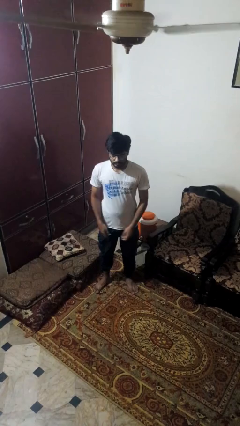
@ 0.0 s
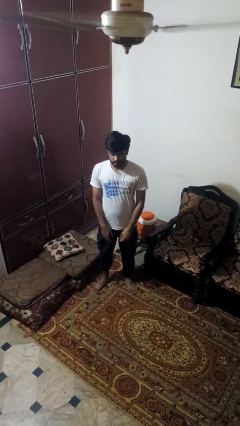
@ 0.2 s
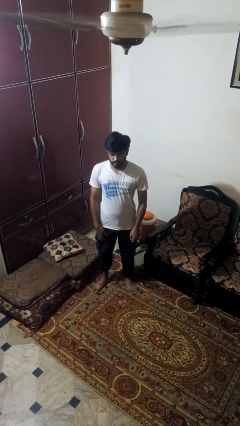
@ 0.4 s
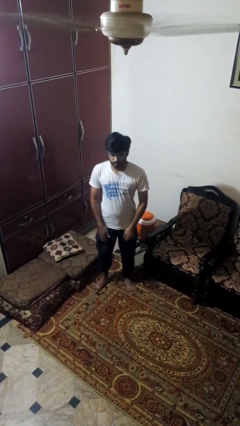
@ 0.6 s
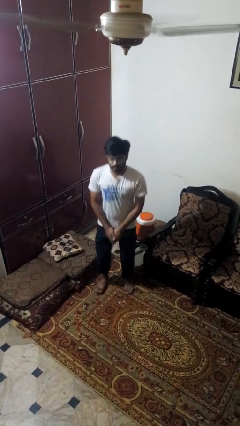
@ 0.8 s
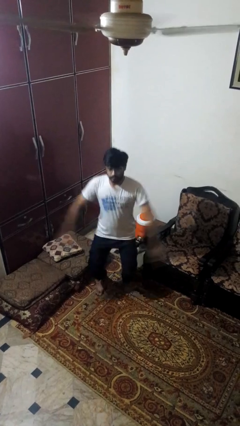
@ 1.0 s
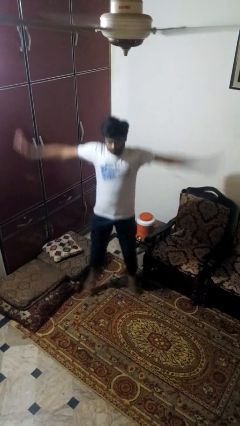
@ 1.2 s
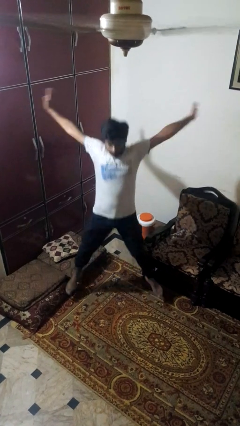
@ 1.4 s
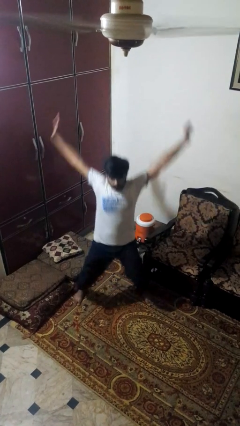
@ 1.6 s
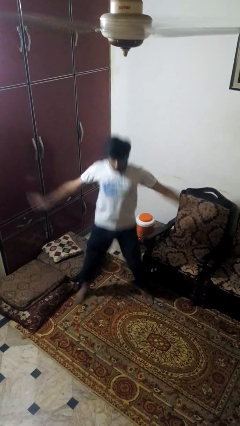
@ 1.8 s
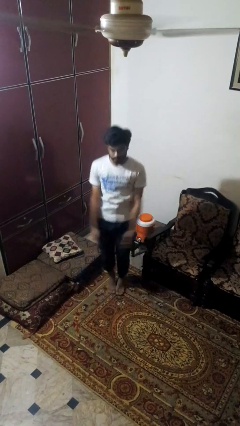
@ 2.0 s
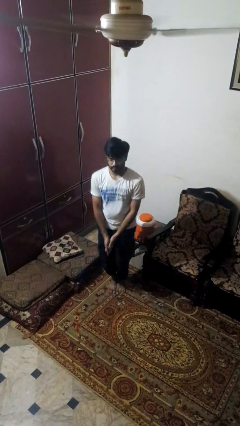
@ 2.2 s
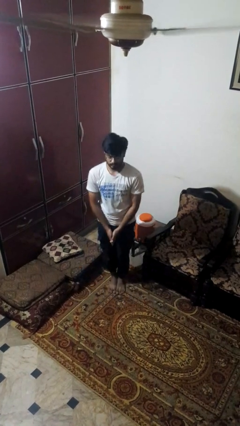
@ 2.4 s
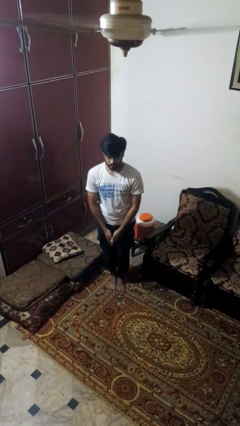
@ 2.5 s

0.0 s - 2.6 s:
person exercises with jumping jacks

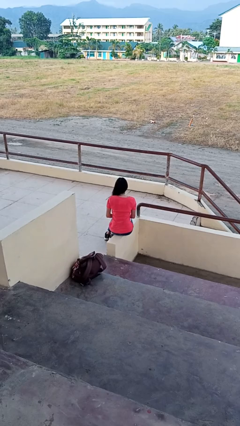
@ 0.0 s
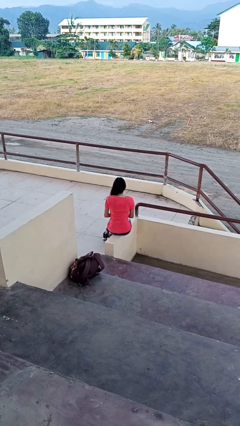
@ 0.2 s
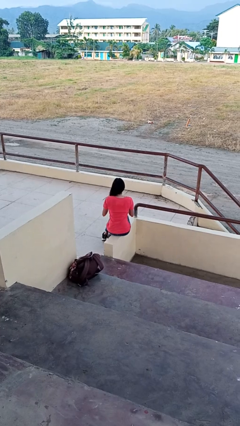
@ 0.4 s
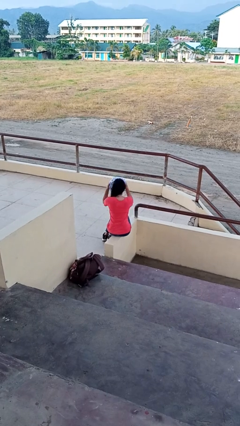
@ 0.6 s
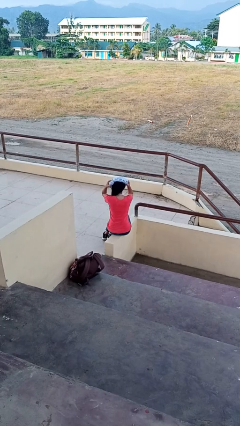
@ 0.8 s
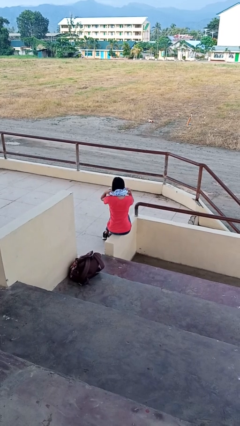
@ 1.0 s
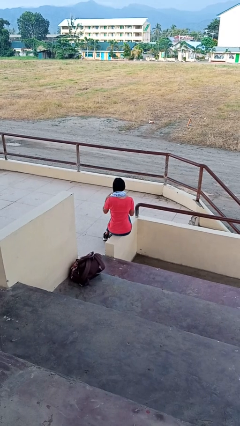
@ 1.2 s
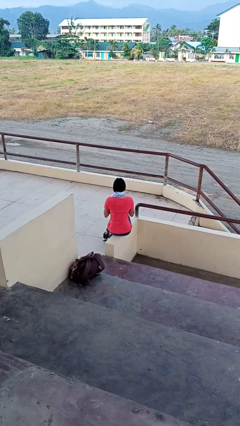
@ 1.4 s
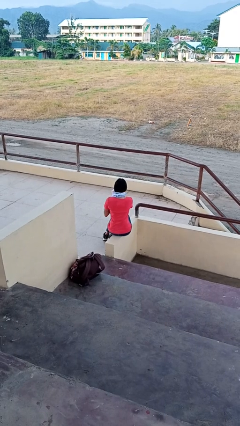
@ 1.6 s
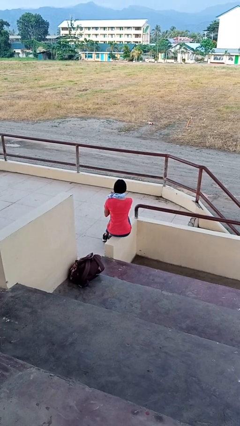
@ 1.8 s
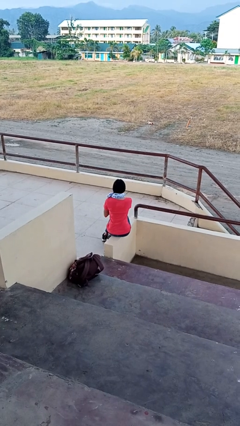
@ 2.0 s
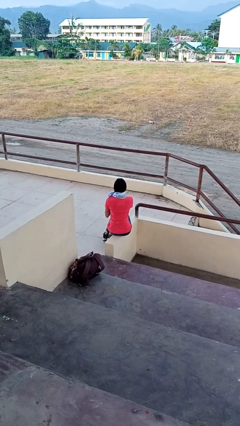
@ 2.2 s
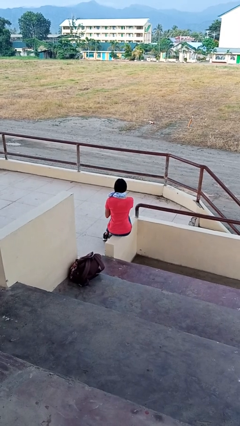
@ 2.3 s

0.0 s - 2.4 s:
person puts on scarf

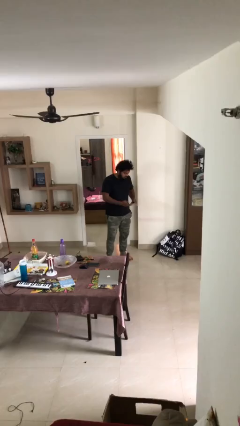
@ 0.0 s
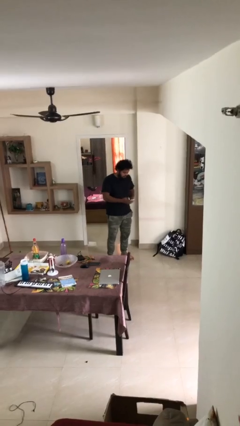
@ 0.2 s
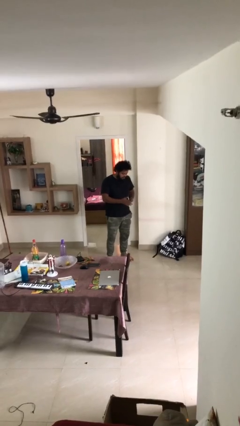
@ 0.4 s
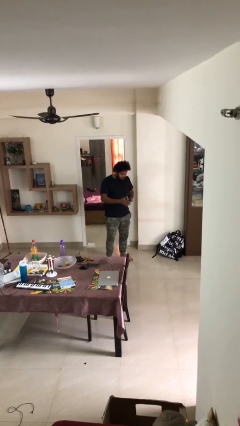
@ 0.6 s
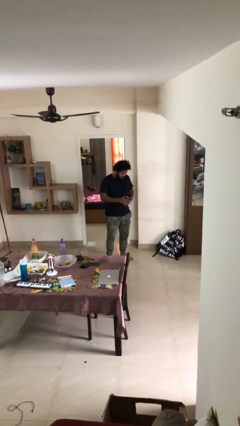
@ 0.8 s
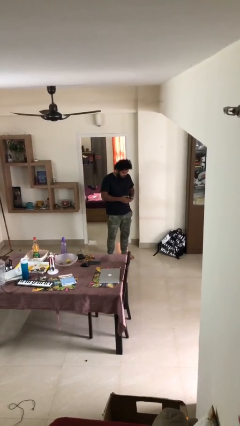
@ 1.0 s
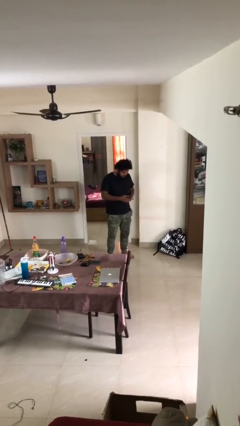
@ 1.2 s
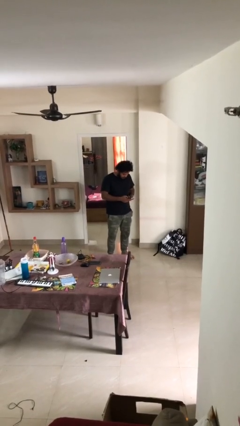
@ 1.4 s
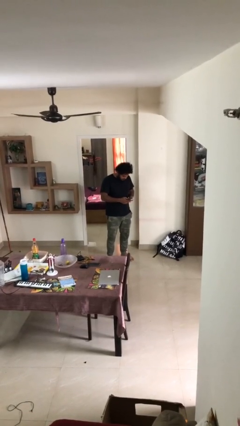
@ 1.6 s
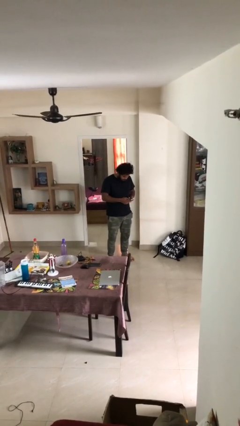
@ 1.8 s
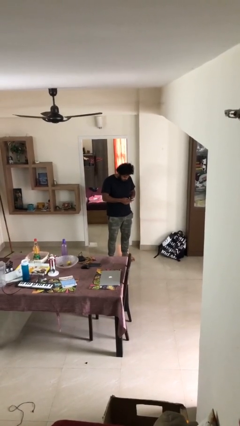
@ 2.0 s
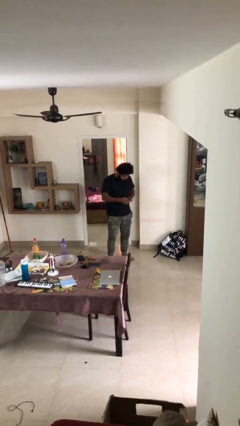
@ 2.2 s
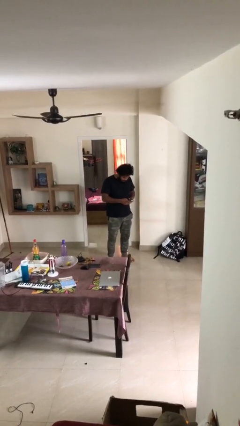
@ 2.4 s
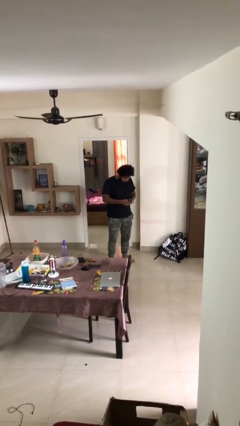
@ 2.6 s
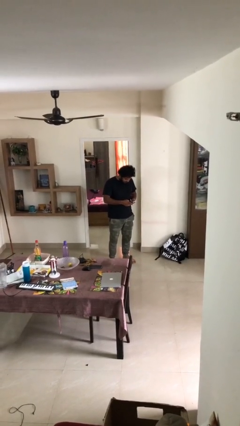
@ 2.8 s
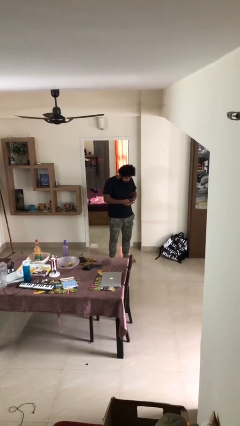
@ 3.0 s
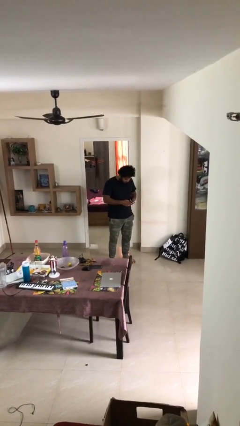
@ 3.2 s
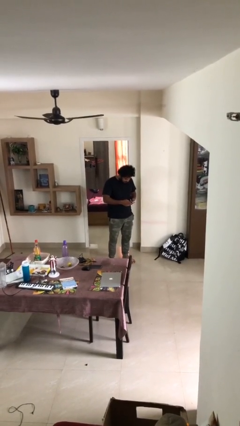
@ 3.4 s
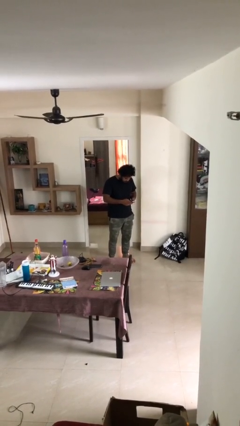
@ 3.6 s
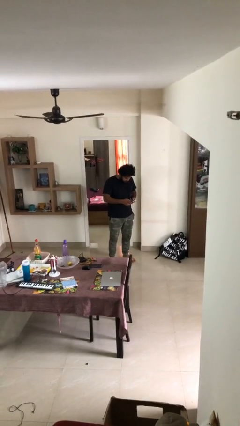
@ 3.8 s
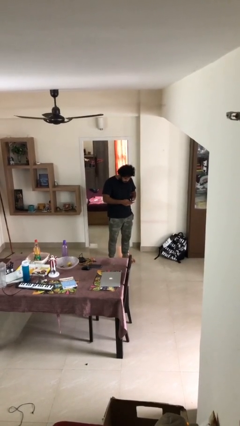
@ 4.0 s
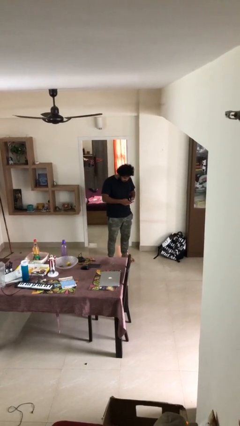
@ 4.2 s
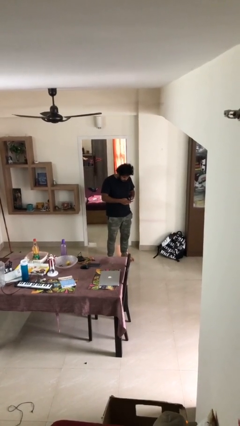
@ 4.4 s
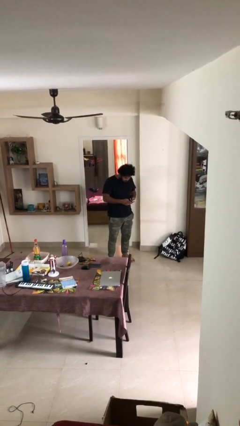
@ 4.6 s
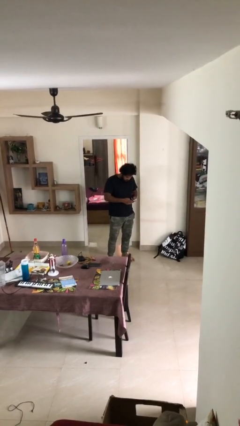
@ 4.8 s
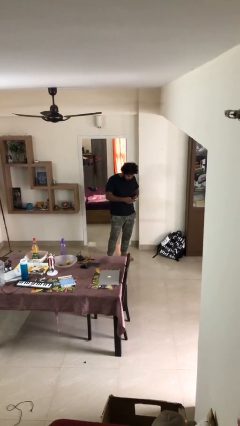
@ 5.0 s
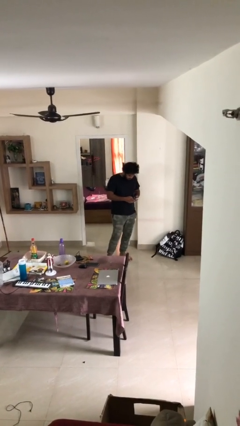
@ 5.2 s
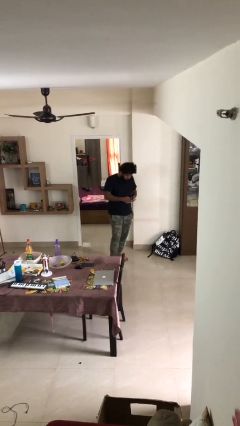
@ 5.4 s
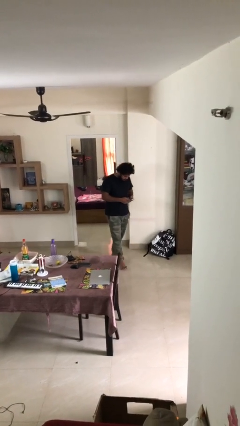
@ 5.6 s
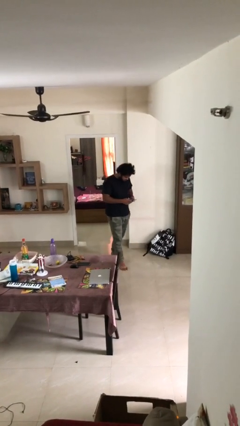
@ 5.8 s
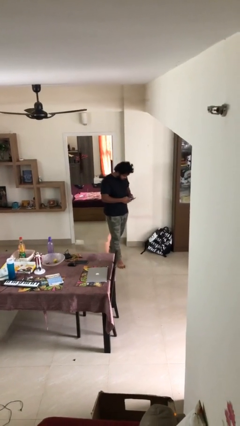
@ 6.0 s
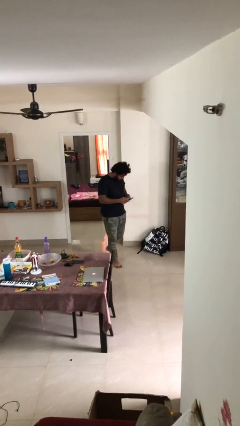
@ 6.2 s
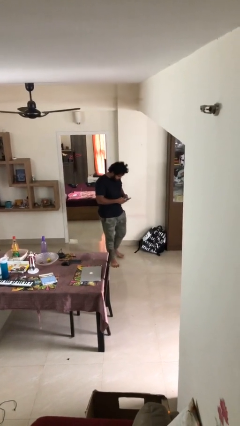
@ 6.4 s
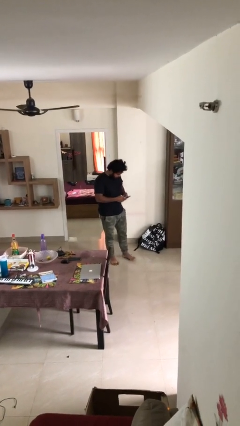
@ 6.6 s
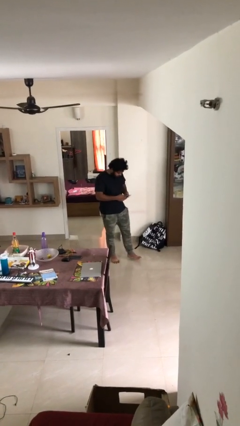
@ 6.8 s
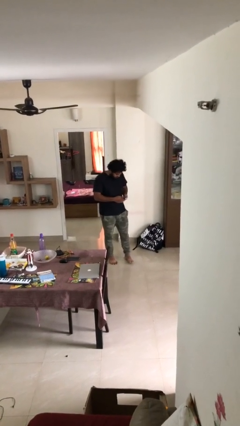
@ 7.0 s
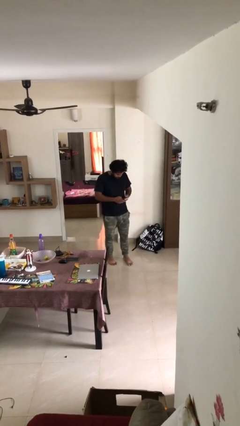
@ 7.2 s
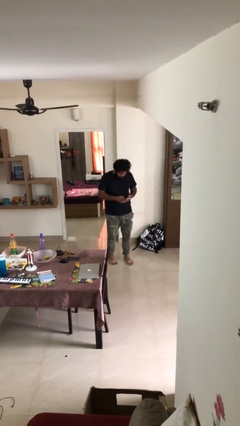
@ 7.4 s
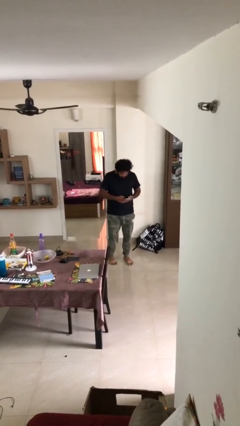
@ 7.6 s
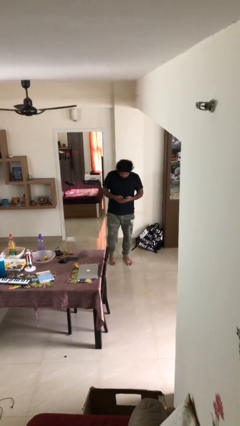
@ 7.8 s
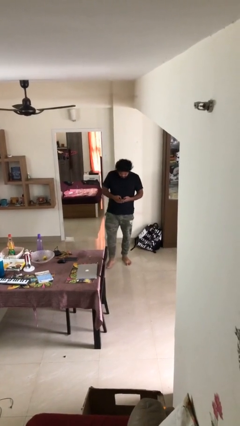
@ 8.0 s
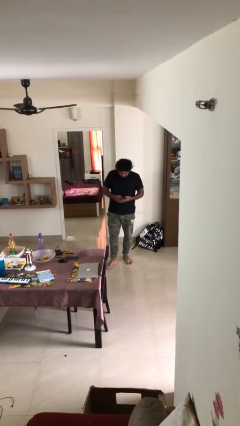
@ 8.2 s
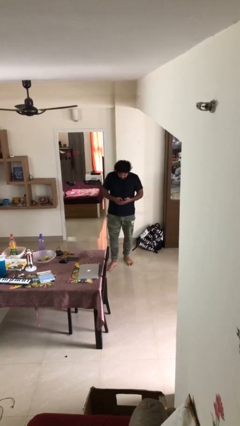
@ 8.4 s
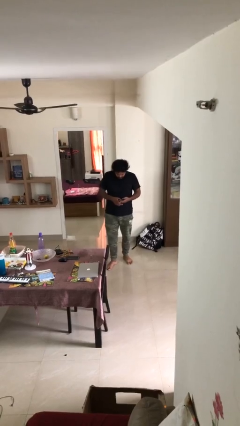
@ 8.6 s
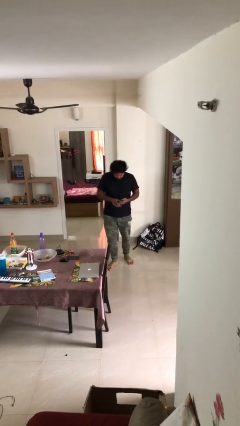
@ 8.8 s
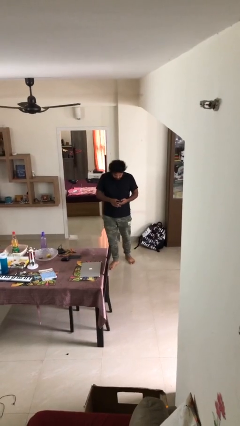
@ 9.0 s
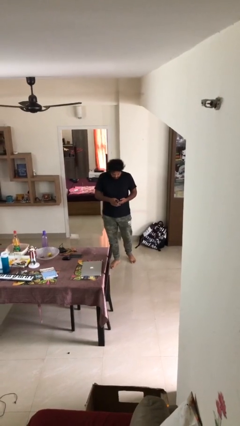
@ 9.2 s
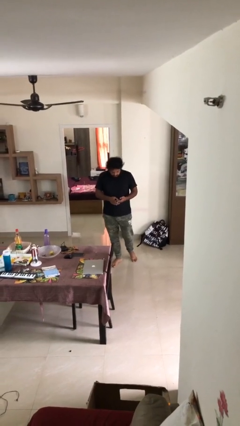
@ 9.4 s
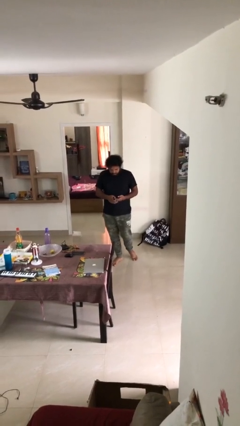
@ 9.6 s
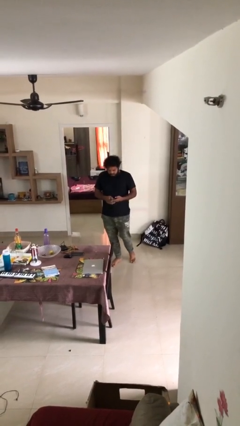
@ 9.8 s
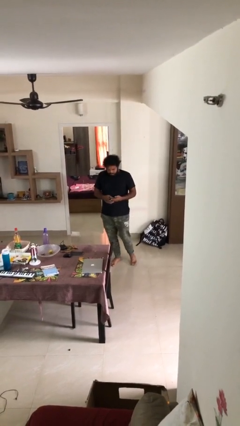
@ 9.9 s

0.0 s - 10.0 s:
person texts on phone

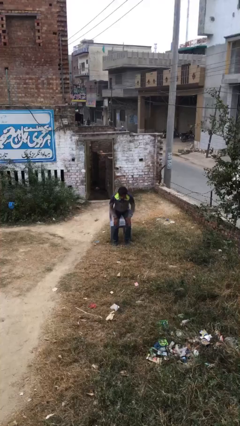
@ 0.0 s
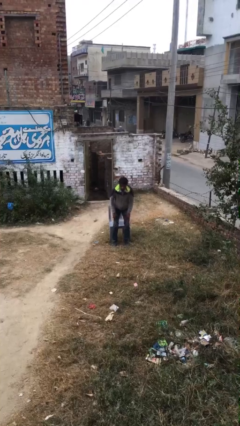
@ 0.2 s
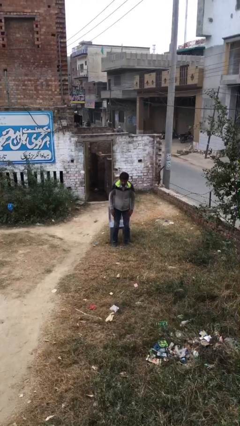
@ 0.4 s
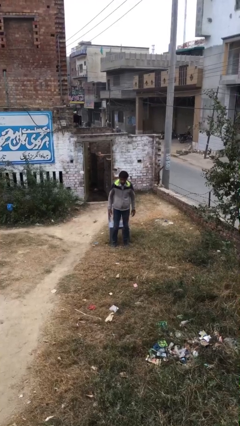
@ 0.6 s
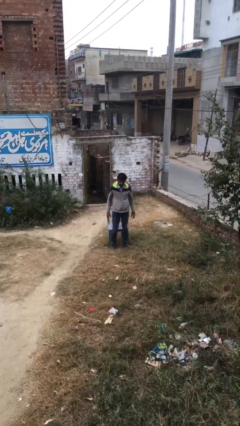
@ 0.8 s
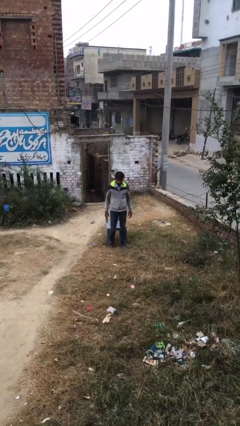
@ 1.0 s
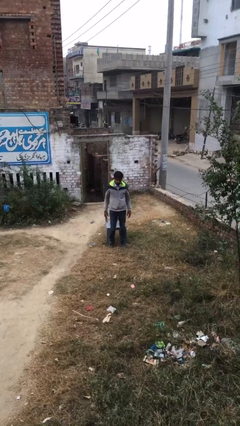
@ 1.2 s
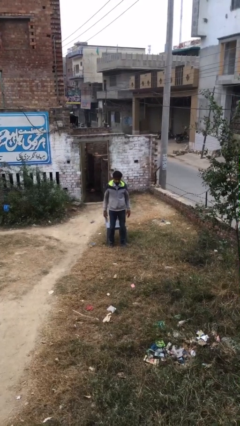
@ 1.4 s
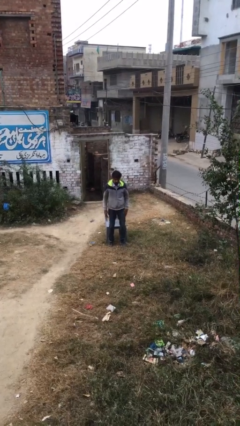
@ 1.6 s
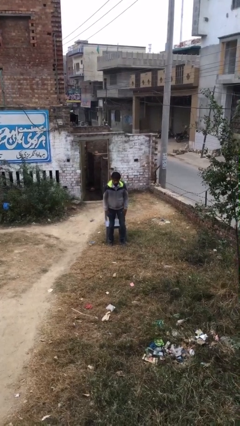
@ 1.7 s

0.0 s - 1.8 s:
person stands up

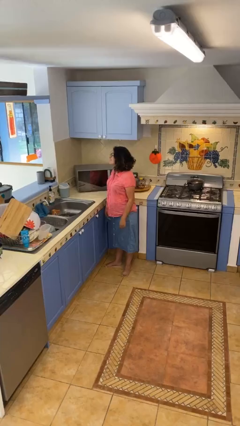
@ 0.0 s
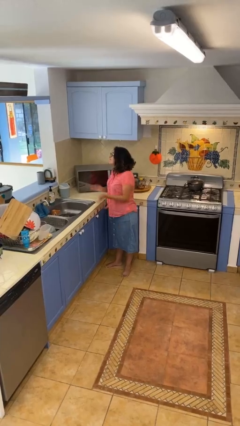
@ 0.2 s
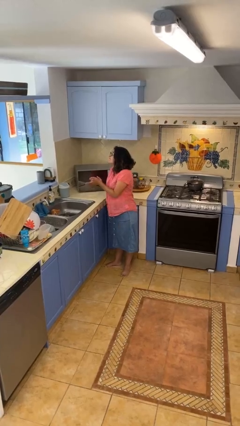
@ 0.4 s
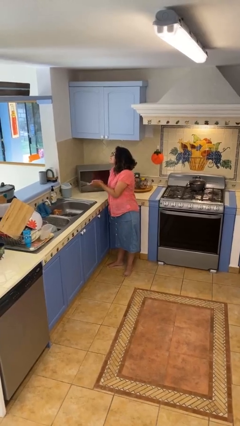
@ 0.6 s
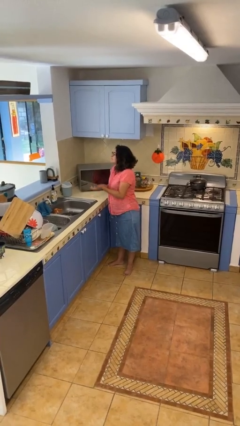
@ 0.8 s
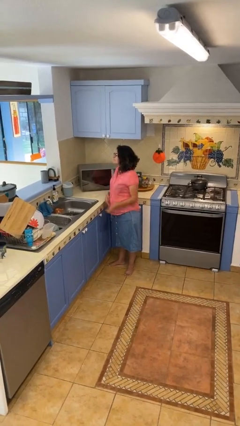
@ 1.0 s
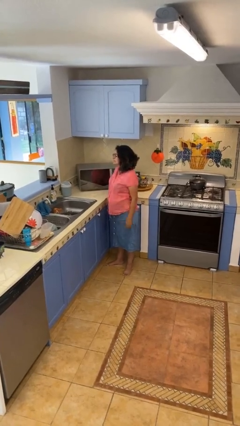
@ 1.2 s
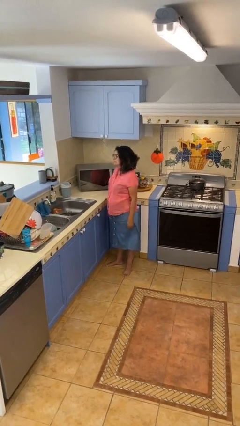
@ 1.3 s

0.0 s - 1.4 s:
person claps hands
